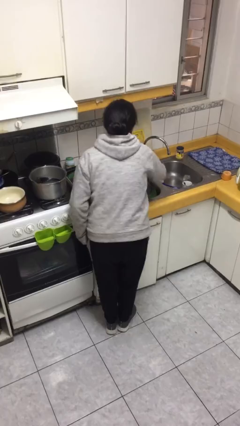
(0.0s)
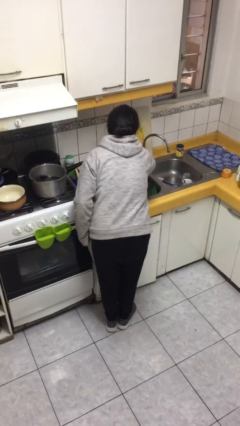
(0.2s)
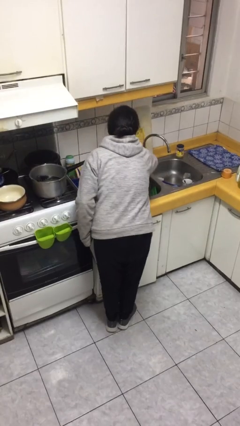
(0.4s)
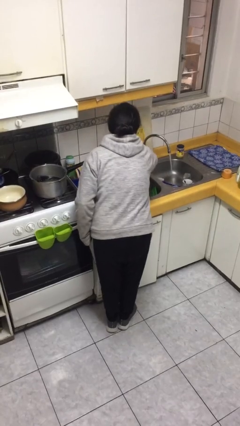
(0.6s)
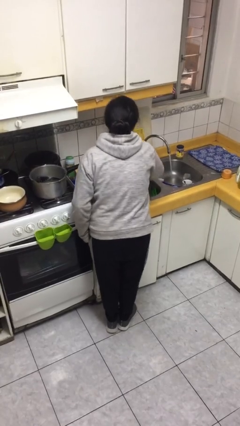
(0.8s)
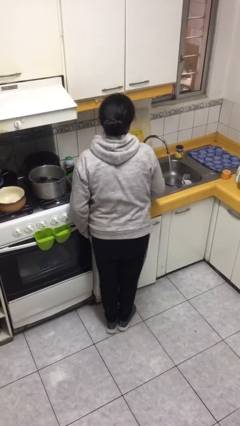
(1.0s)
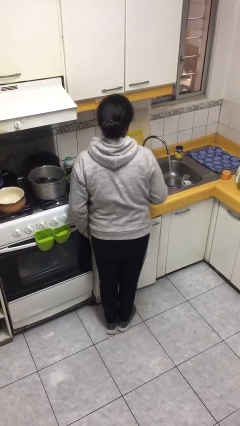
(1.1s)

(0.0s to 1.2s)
person turns on faucet

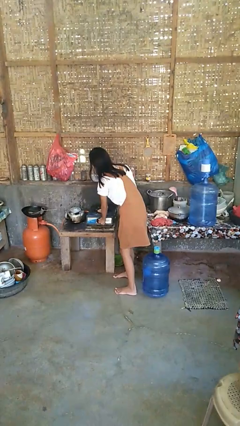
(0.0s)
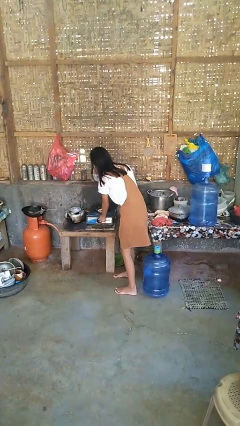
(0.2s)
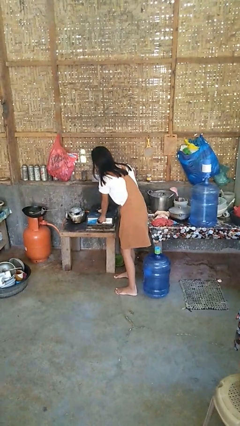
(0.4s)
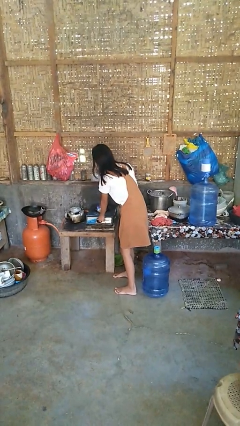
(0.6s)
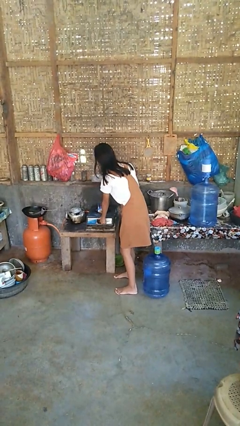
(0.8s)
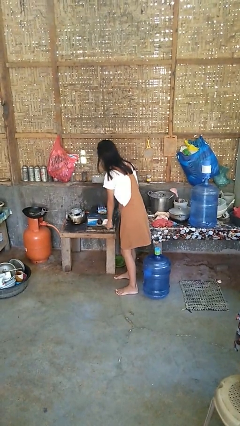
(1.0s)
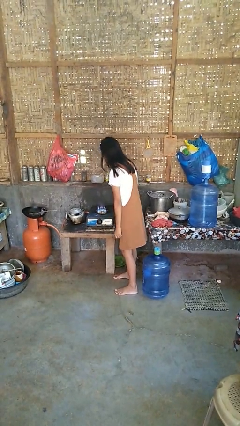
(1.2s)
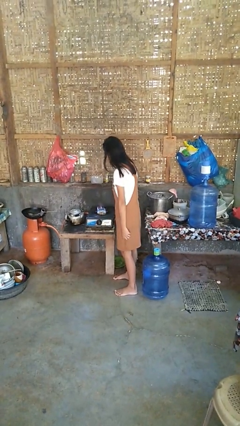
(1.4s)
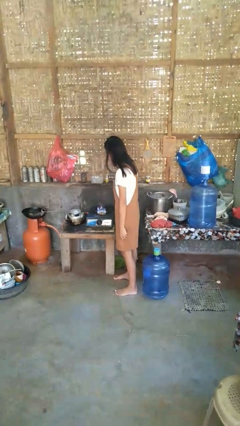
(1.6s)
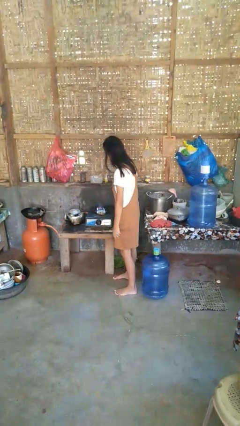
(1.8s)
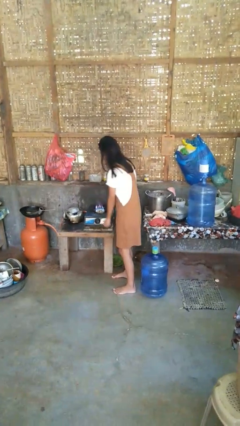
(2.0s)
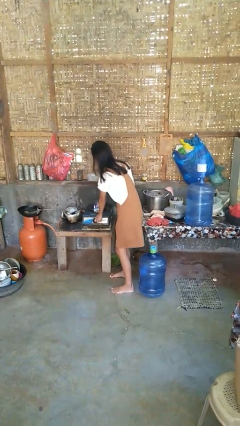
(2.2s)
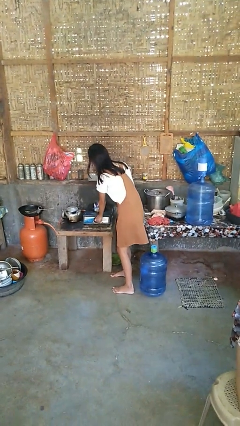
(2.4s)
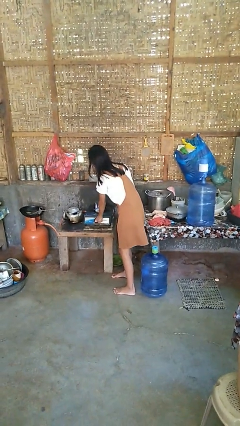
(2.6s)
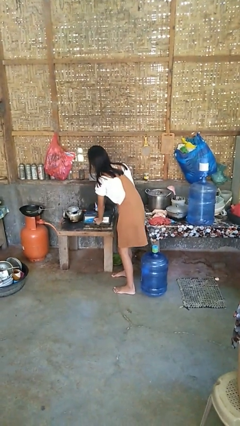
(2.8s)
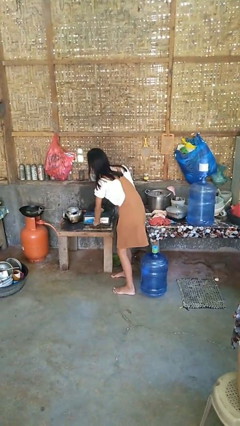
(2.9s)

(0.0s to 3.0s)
person turns on stovetop

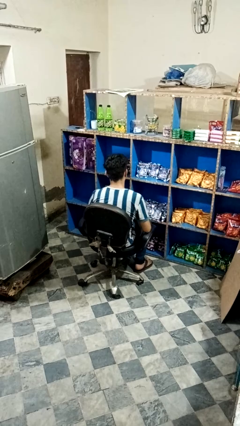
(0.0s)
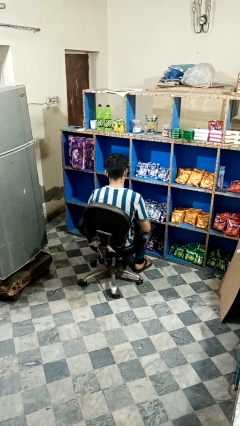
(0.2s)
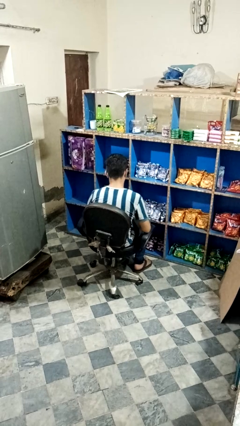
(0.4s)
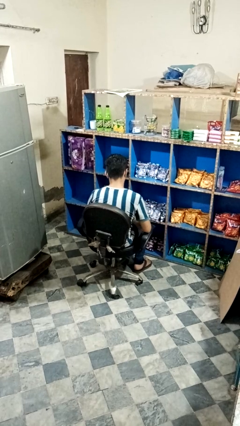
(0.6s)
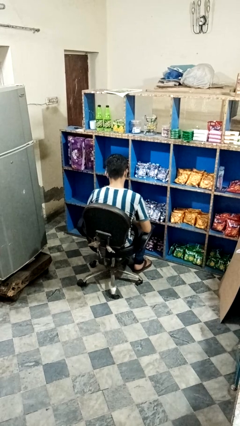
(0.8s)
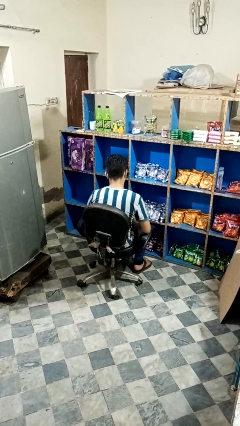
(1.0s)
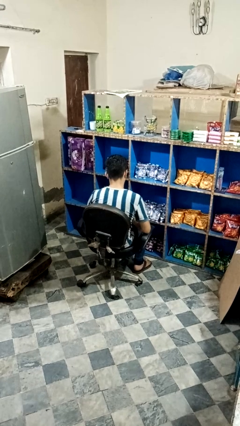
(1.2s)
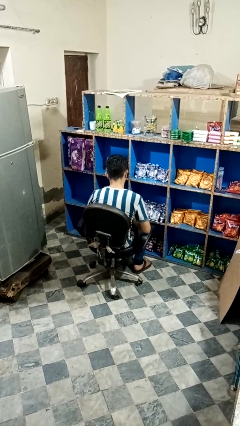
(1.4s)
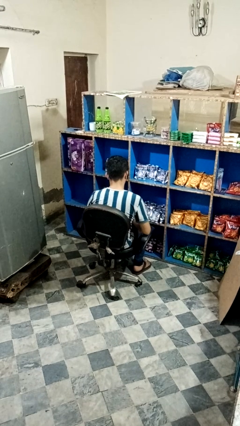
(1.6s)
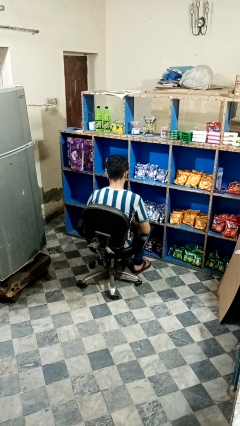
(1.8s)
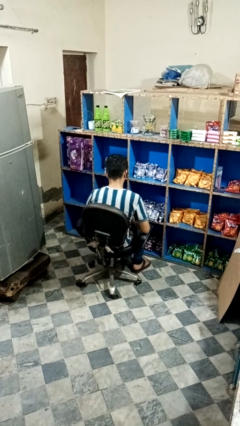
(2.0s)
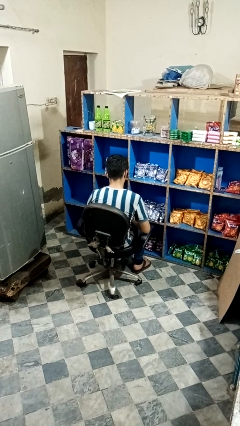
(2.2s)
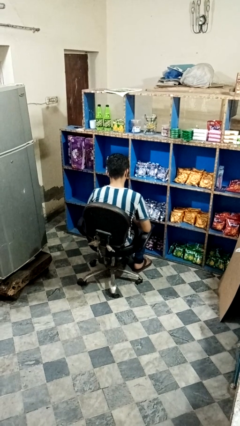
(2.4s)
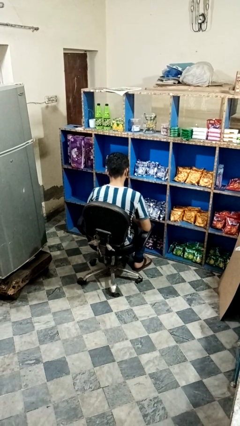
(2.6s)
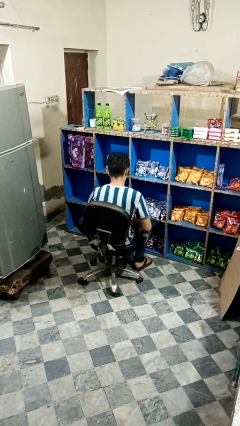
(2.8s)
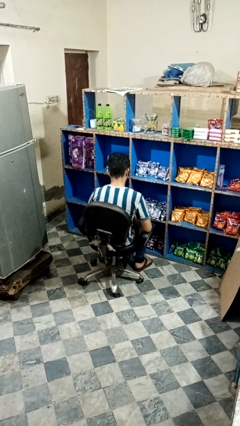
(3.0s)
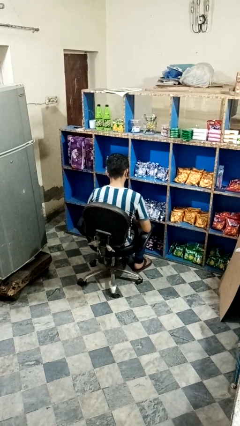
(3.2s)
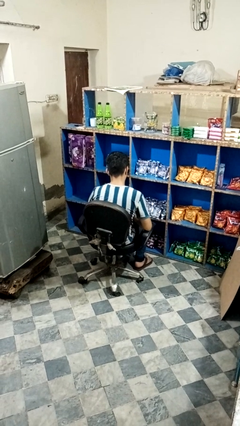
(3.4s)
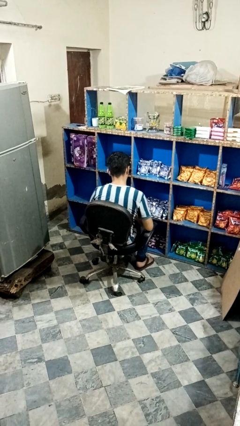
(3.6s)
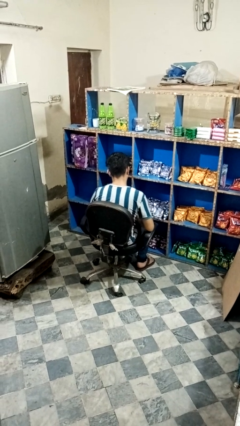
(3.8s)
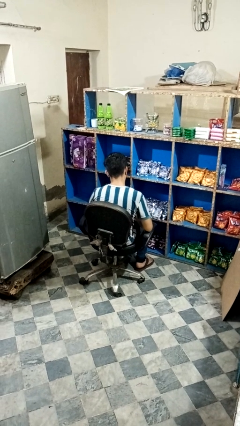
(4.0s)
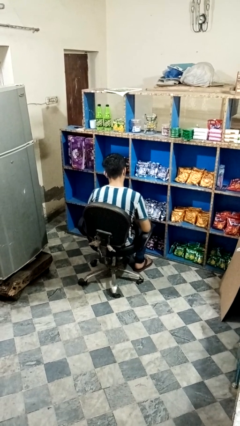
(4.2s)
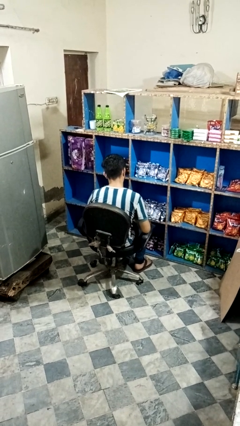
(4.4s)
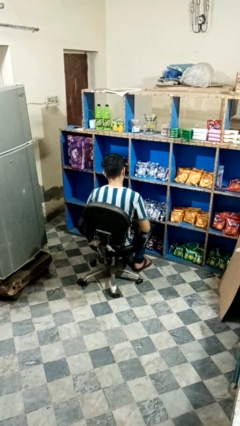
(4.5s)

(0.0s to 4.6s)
person looks at hands in lap

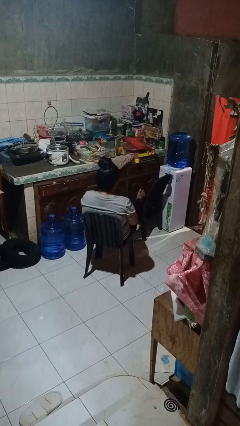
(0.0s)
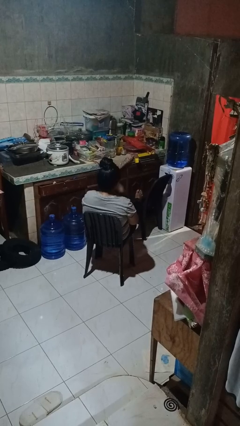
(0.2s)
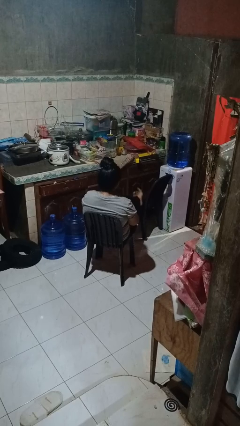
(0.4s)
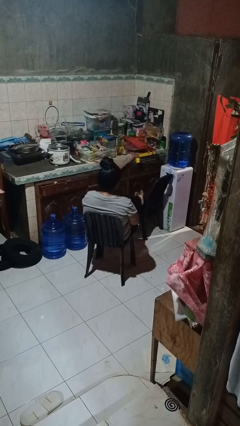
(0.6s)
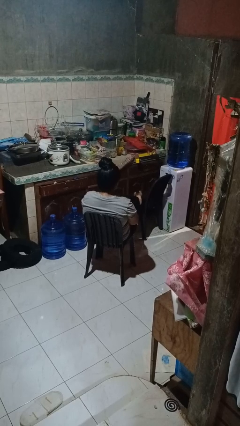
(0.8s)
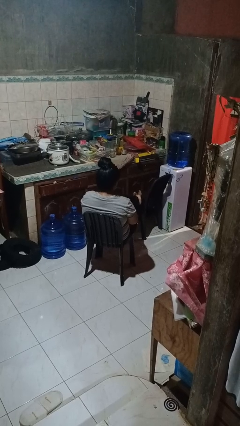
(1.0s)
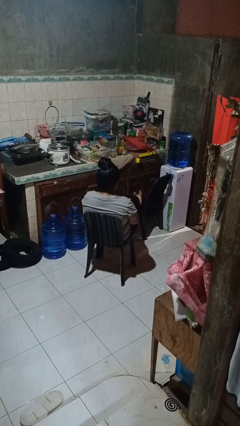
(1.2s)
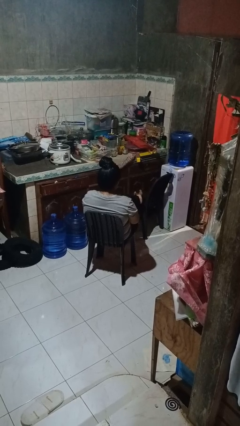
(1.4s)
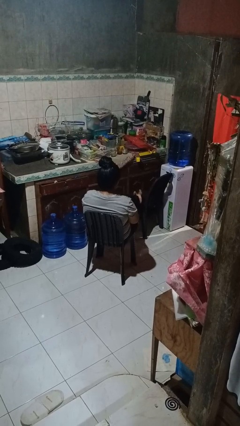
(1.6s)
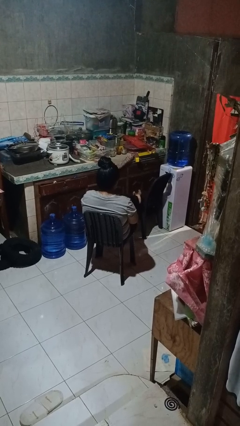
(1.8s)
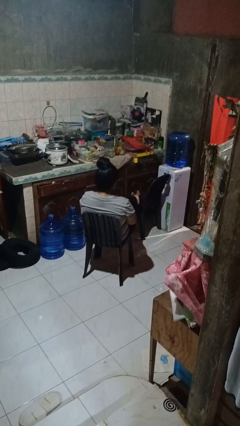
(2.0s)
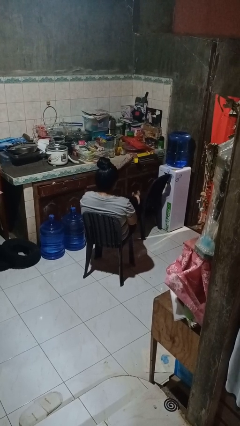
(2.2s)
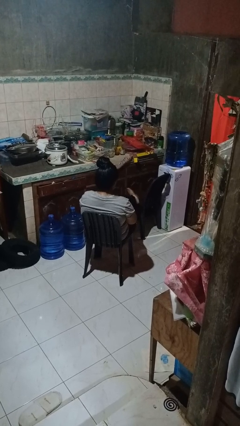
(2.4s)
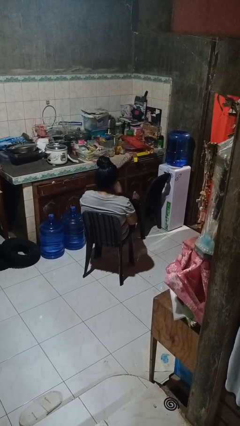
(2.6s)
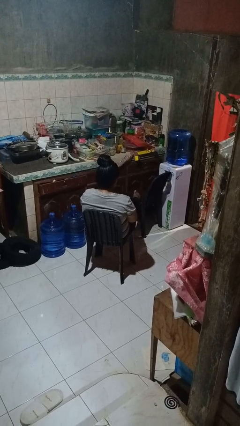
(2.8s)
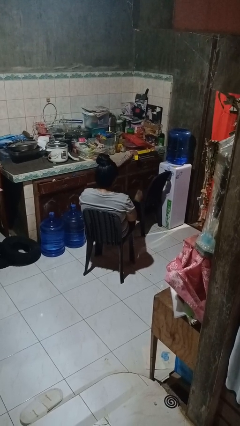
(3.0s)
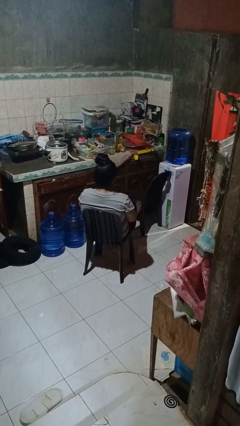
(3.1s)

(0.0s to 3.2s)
person puts feet up

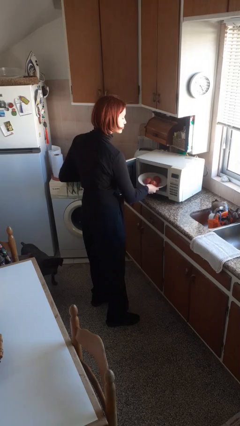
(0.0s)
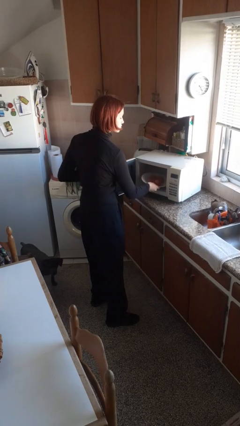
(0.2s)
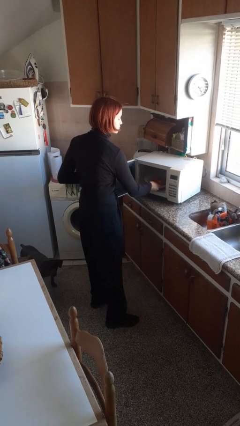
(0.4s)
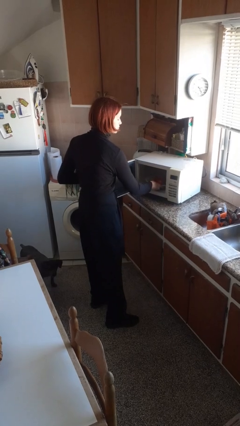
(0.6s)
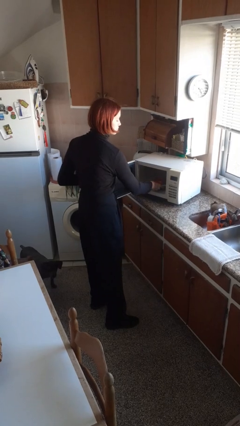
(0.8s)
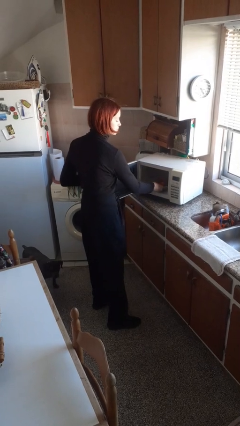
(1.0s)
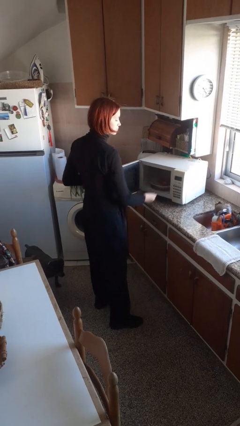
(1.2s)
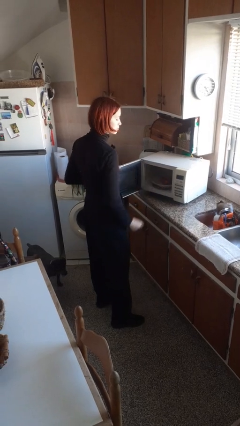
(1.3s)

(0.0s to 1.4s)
person puts object into microwave

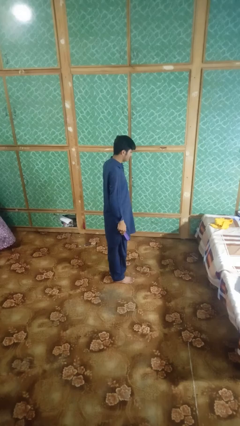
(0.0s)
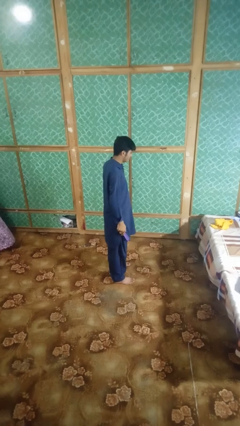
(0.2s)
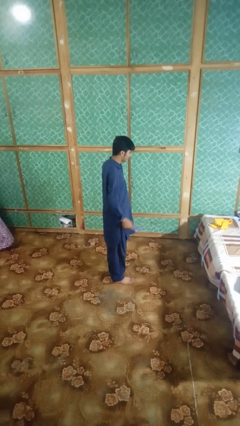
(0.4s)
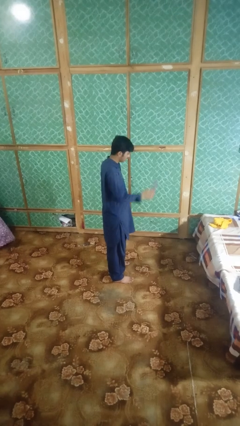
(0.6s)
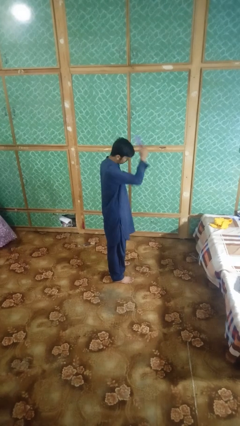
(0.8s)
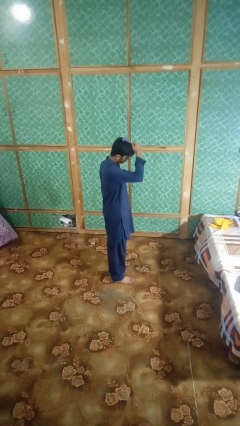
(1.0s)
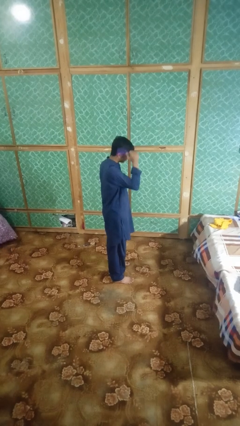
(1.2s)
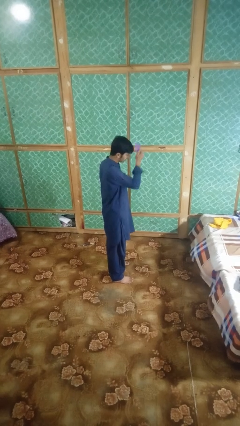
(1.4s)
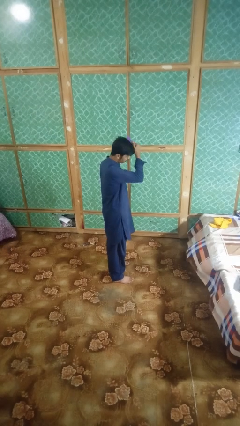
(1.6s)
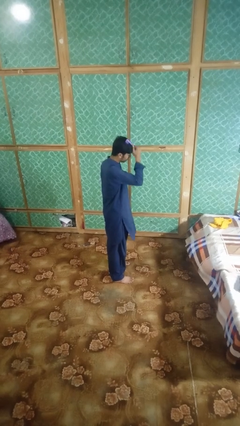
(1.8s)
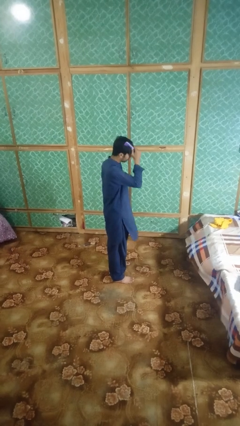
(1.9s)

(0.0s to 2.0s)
person brushes hair

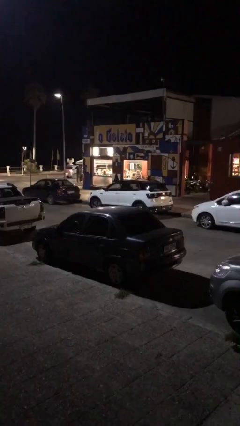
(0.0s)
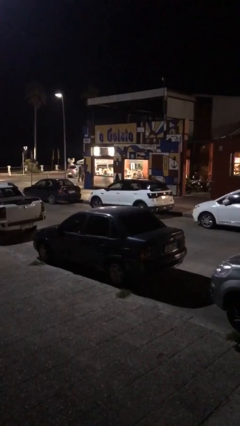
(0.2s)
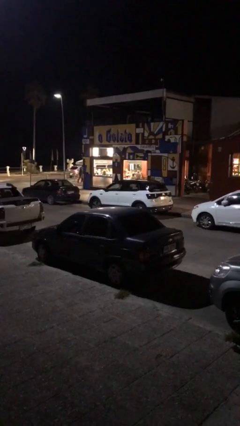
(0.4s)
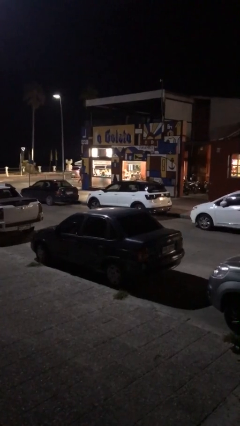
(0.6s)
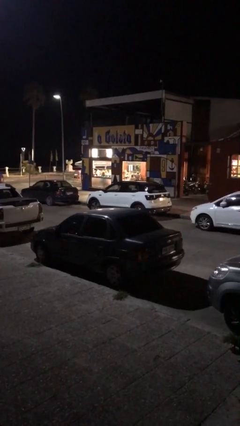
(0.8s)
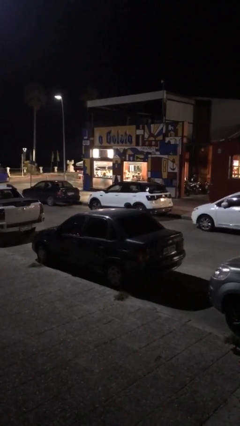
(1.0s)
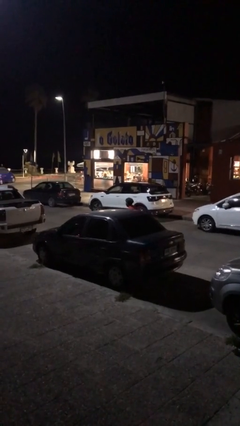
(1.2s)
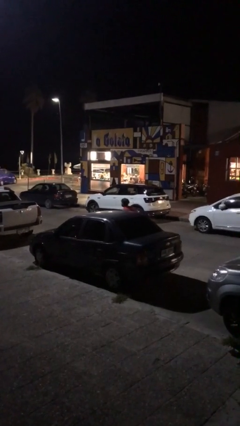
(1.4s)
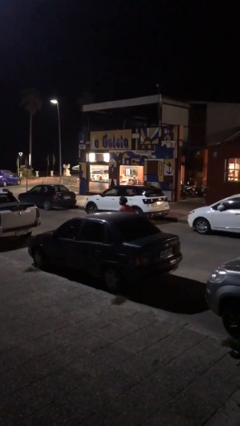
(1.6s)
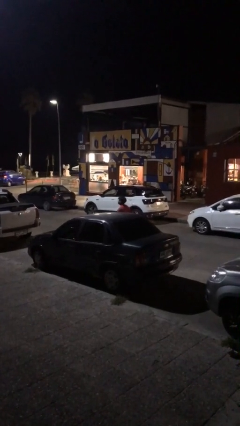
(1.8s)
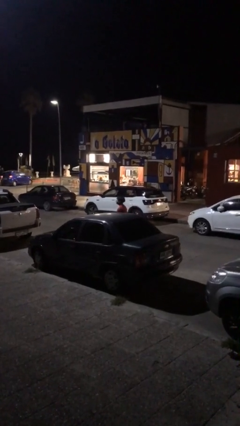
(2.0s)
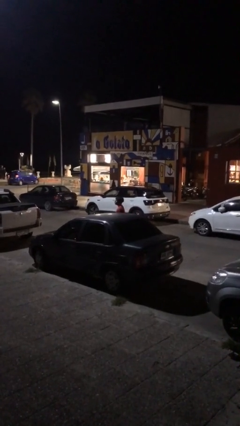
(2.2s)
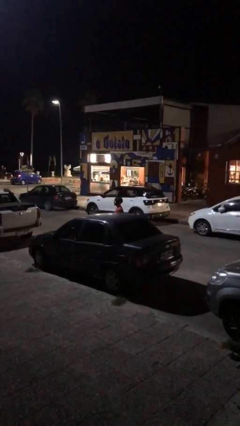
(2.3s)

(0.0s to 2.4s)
person exits car
